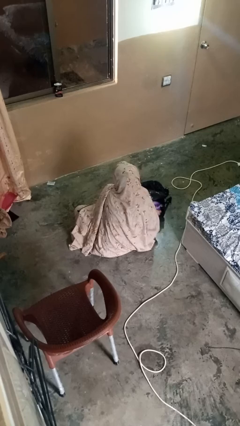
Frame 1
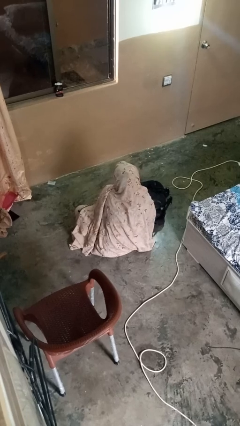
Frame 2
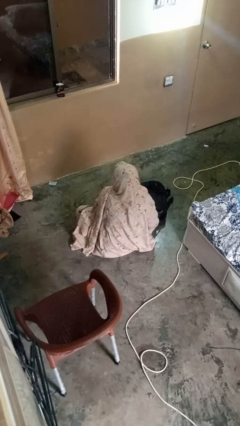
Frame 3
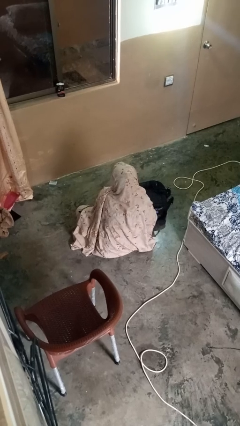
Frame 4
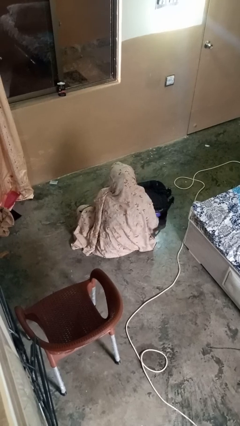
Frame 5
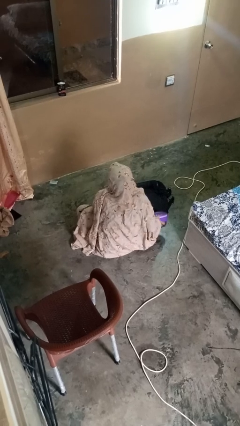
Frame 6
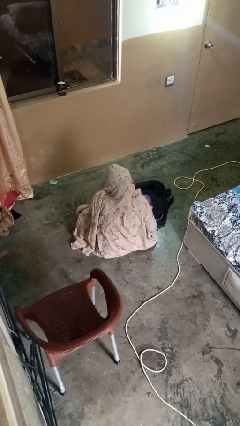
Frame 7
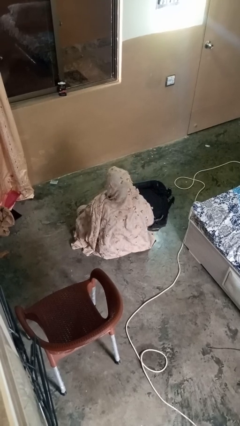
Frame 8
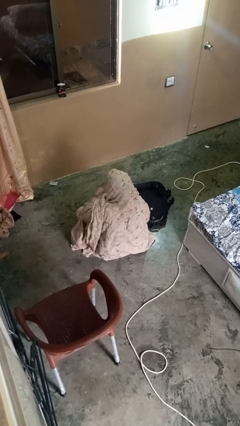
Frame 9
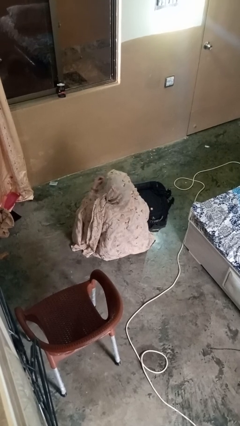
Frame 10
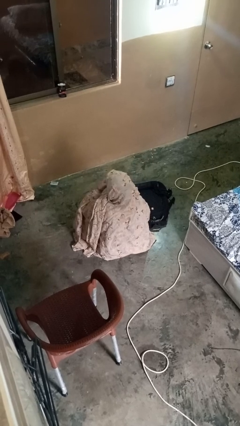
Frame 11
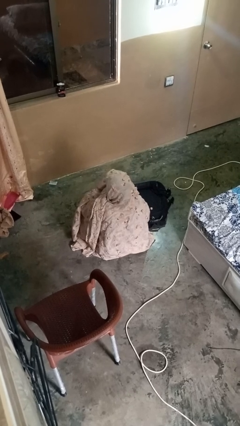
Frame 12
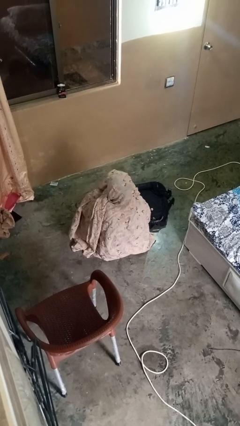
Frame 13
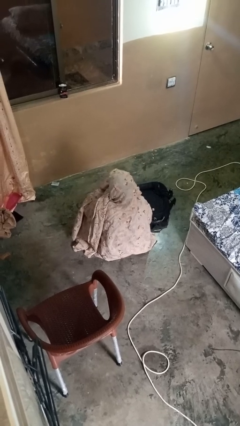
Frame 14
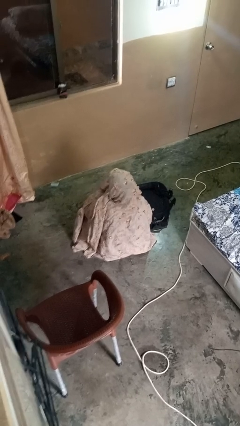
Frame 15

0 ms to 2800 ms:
person eats snack from bag

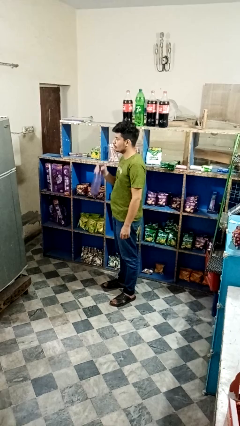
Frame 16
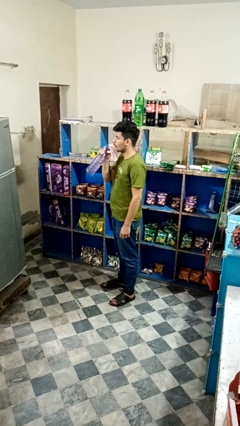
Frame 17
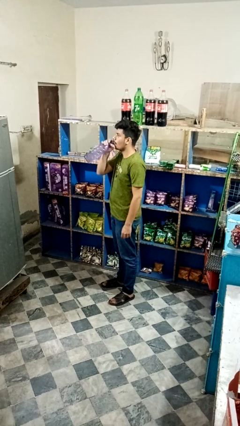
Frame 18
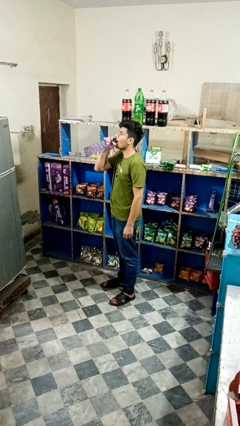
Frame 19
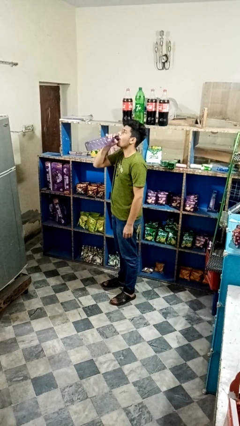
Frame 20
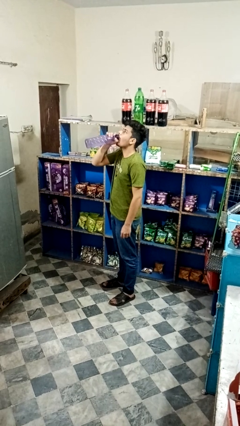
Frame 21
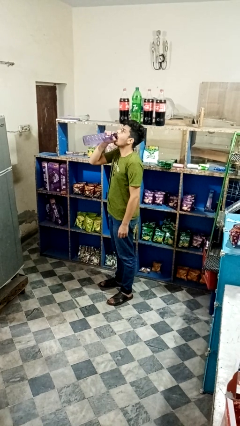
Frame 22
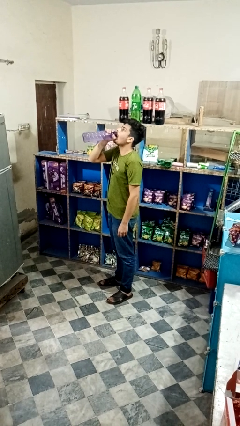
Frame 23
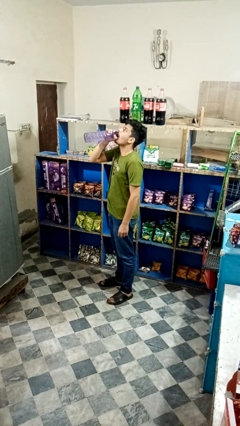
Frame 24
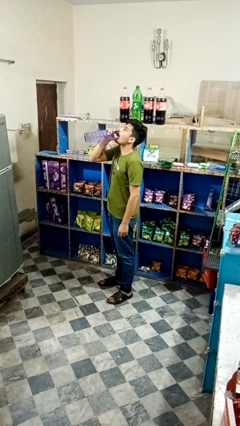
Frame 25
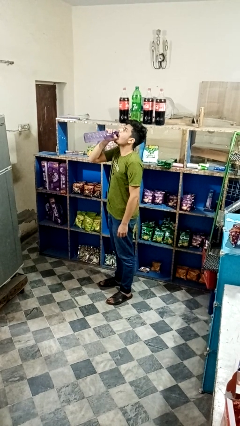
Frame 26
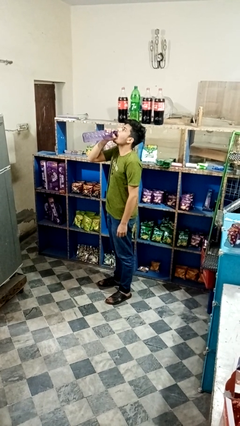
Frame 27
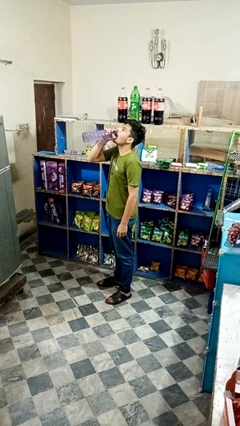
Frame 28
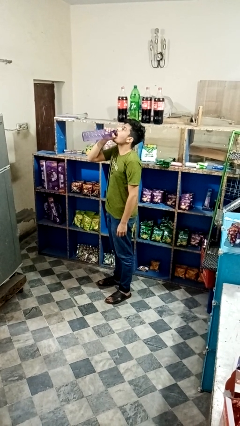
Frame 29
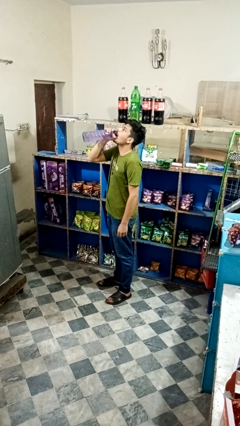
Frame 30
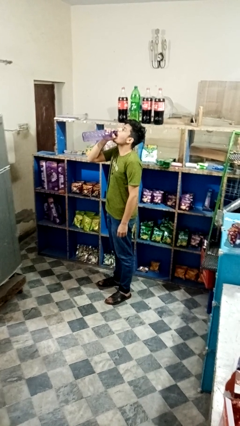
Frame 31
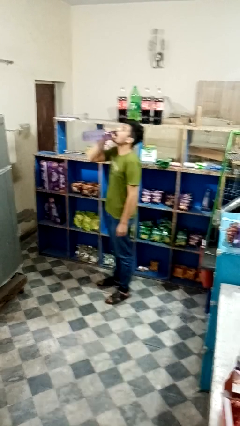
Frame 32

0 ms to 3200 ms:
person drinks from bottle

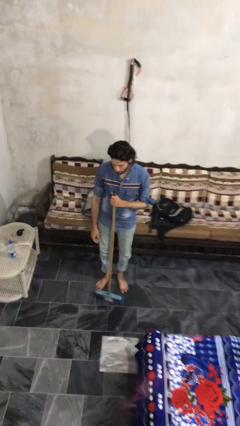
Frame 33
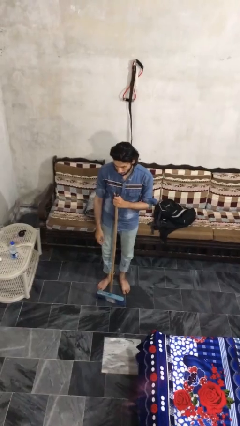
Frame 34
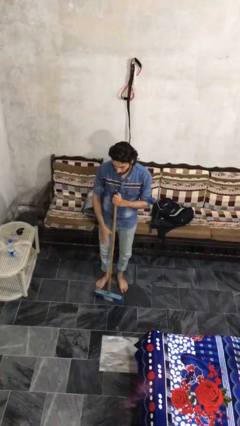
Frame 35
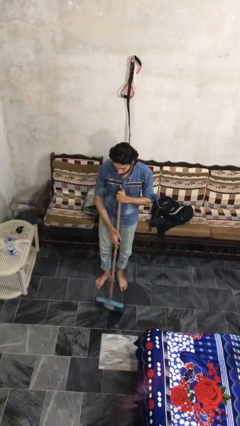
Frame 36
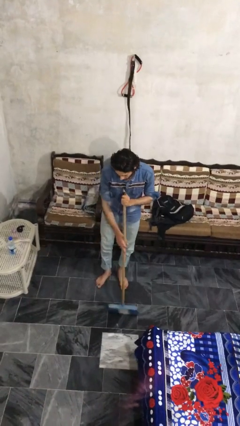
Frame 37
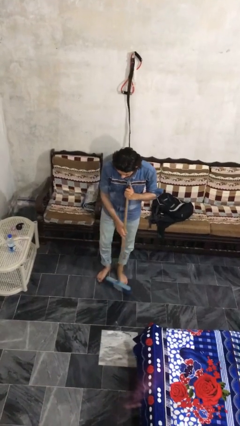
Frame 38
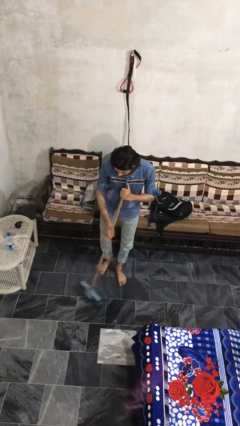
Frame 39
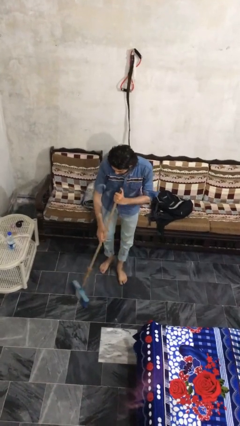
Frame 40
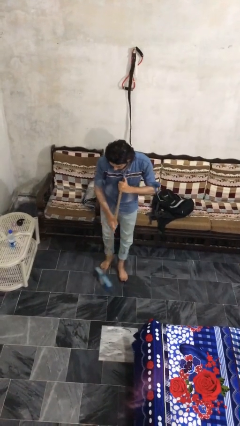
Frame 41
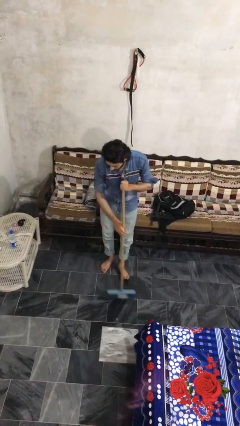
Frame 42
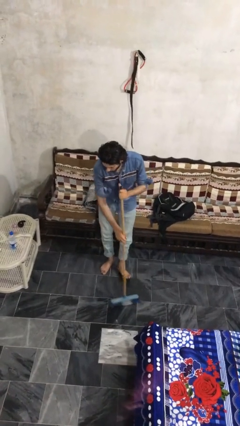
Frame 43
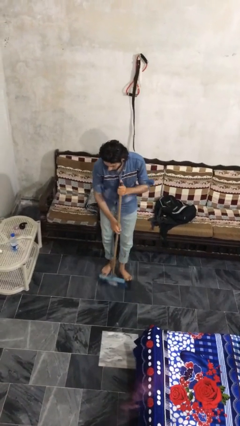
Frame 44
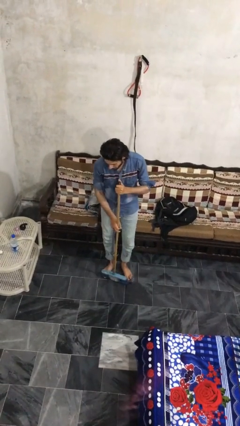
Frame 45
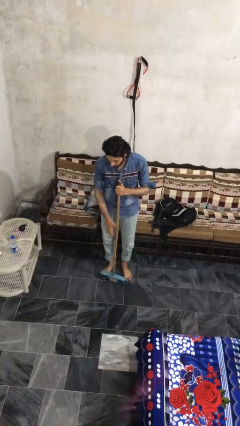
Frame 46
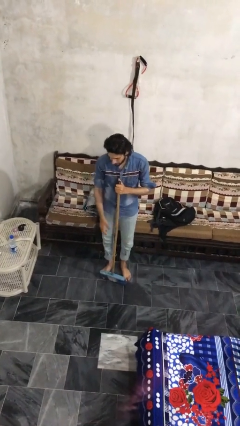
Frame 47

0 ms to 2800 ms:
person sweeps floor

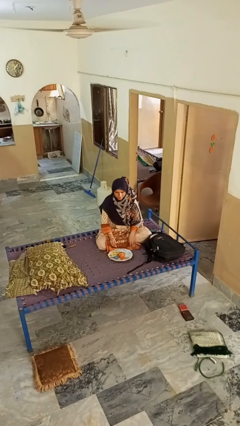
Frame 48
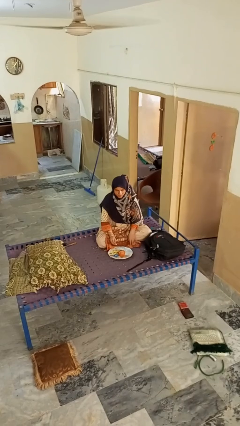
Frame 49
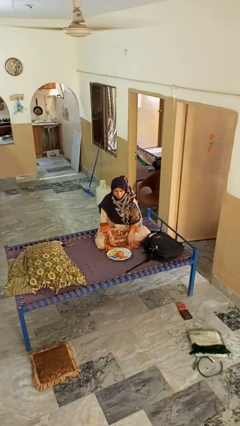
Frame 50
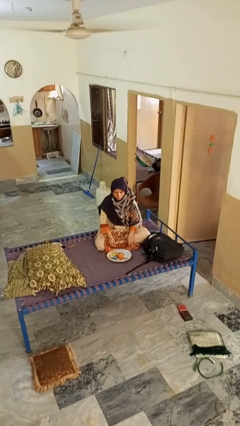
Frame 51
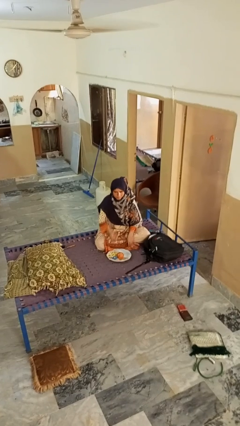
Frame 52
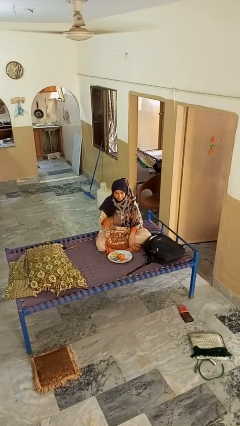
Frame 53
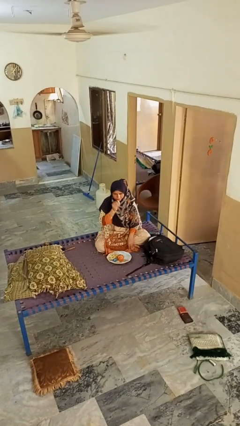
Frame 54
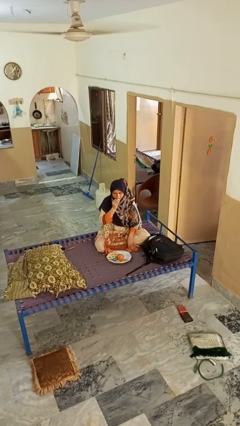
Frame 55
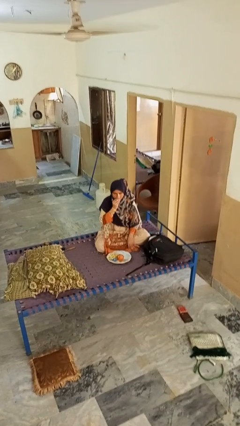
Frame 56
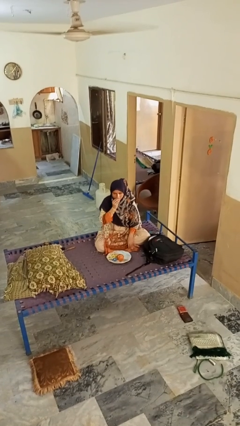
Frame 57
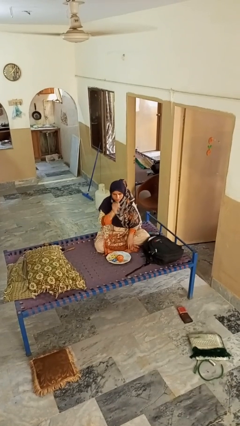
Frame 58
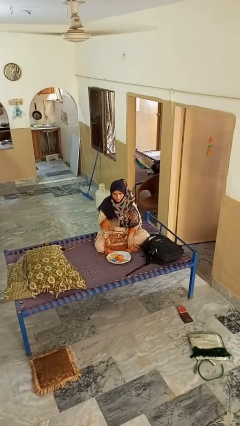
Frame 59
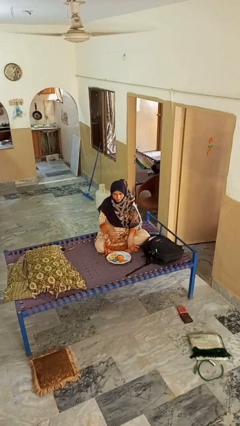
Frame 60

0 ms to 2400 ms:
person eats apple

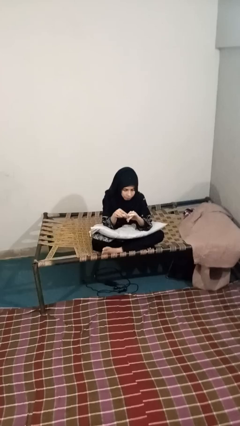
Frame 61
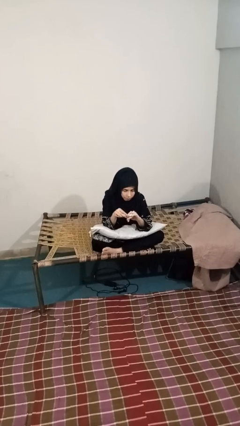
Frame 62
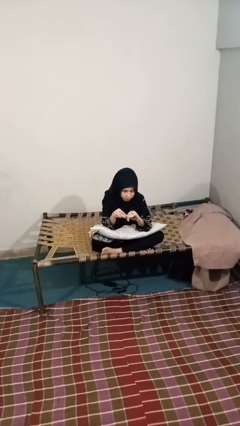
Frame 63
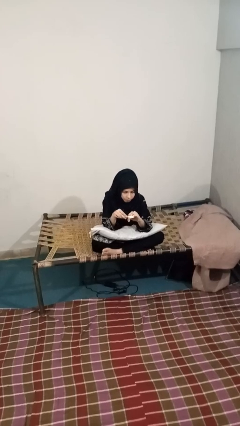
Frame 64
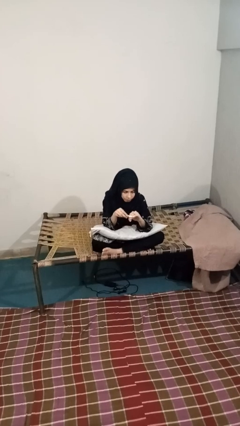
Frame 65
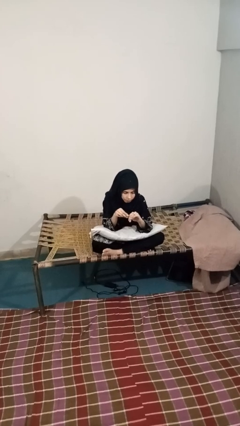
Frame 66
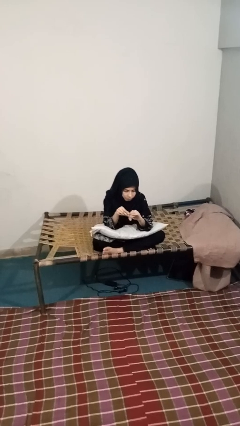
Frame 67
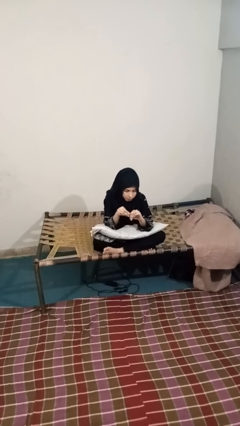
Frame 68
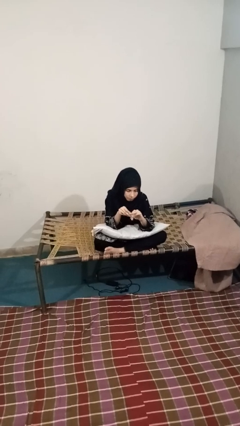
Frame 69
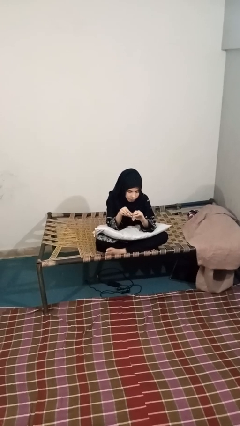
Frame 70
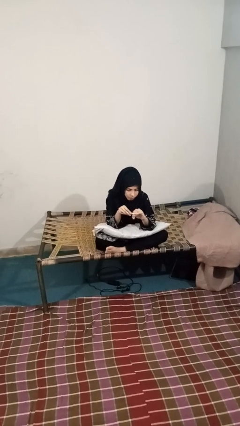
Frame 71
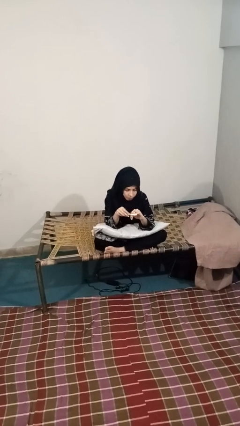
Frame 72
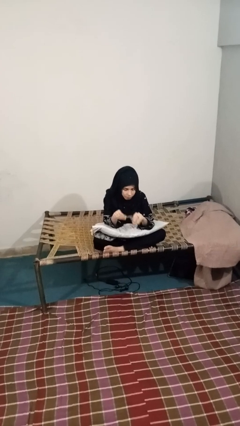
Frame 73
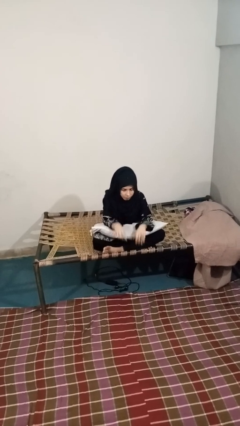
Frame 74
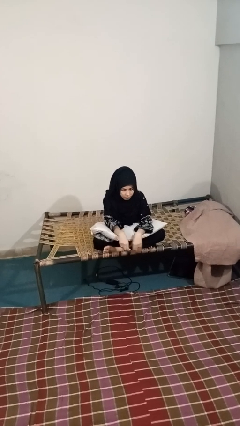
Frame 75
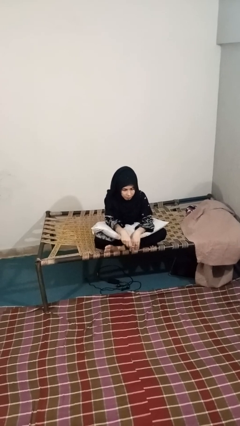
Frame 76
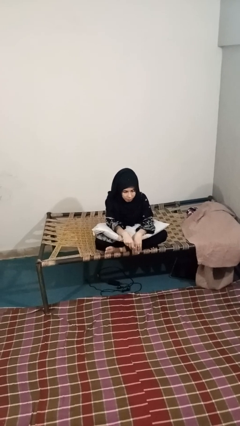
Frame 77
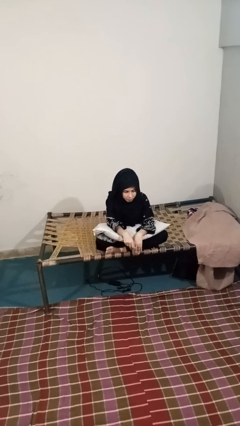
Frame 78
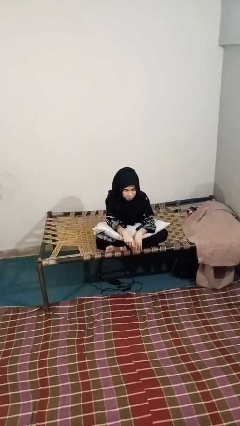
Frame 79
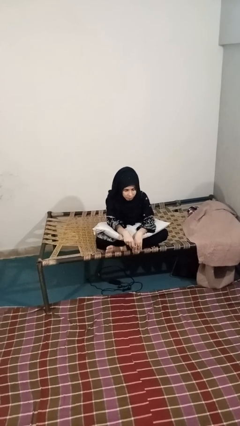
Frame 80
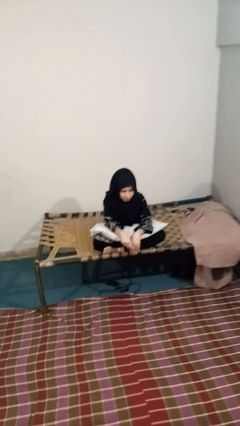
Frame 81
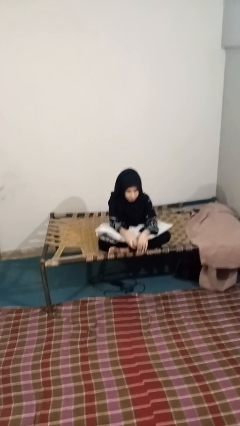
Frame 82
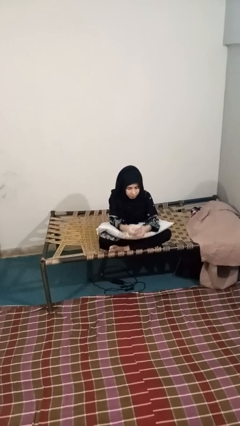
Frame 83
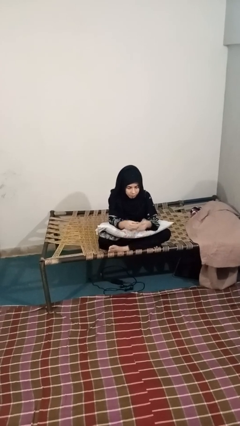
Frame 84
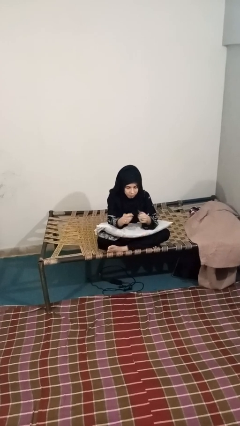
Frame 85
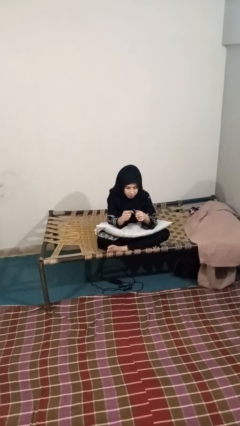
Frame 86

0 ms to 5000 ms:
person files fingernails

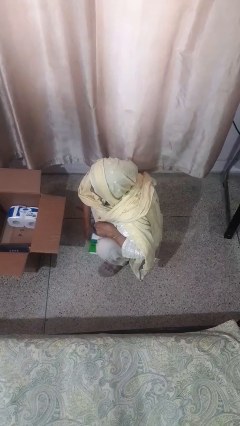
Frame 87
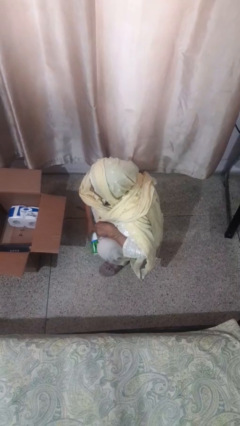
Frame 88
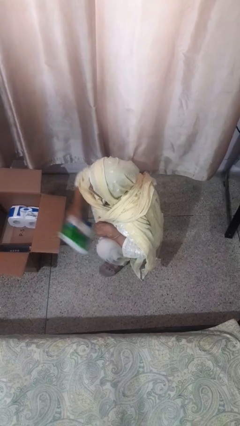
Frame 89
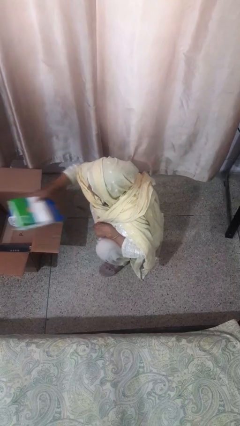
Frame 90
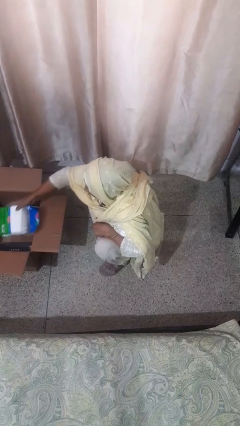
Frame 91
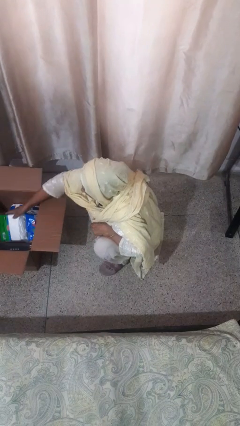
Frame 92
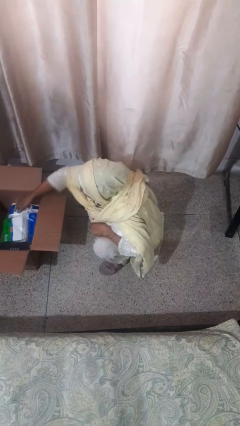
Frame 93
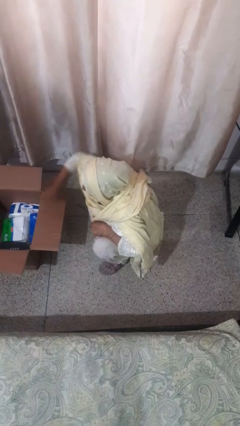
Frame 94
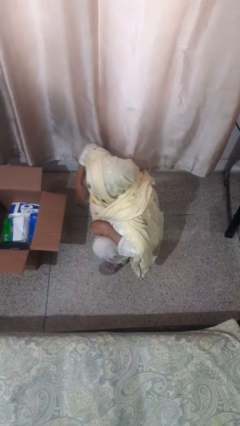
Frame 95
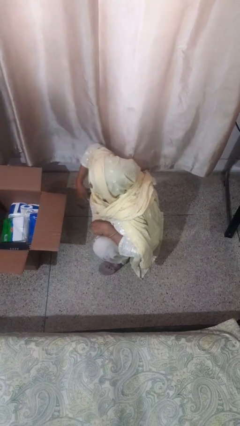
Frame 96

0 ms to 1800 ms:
person puts object into box
